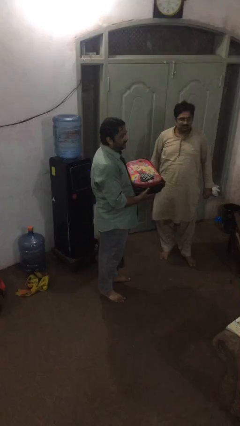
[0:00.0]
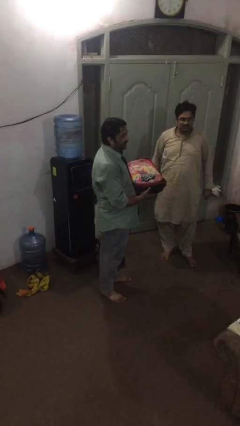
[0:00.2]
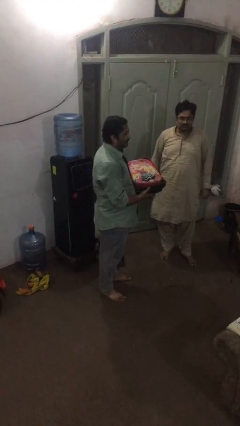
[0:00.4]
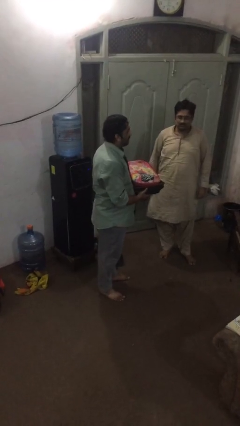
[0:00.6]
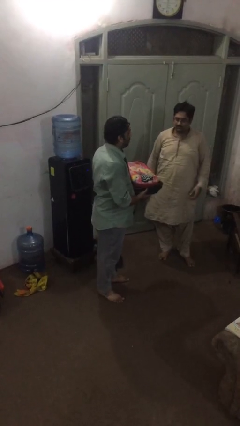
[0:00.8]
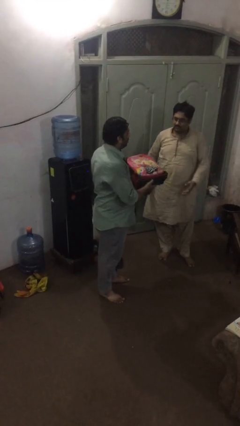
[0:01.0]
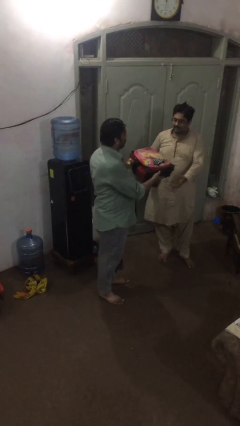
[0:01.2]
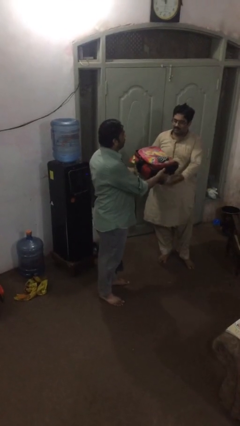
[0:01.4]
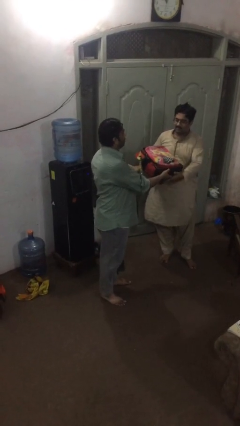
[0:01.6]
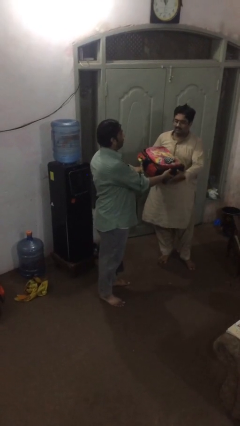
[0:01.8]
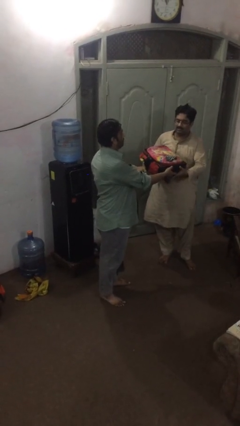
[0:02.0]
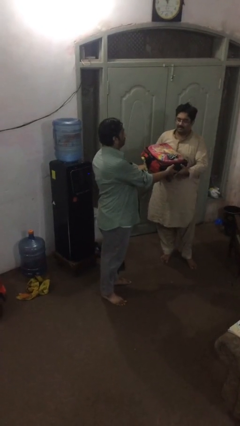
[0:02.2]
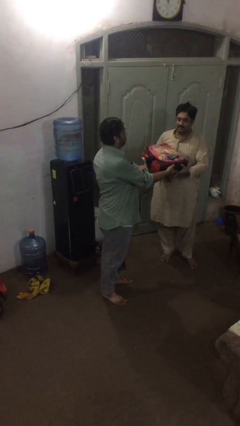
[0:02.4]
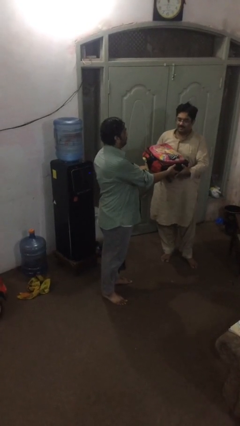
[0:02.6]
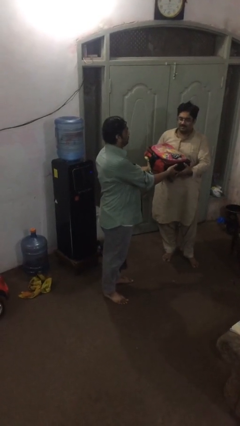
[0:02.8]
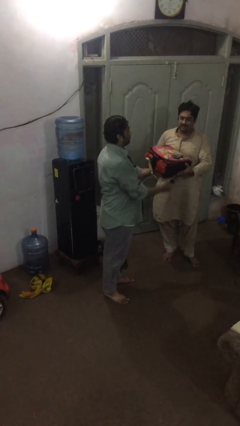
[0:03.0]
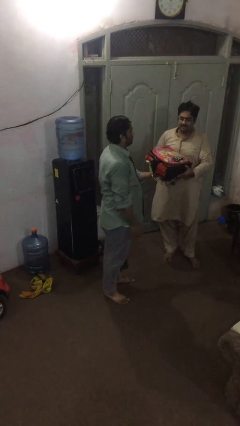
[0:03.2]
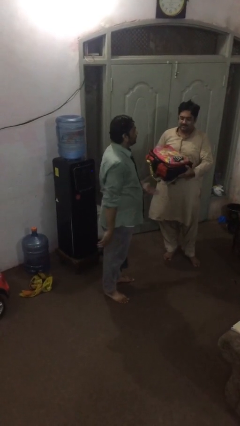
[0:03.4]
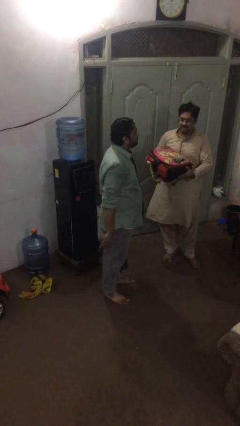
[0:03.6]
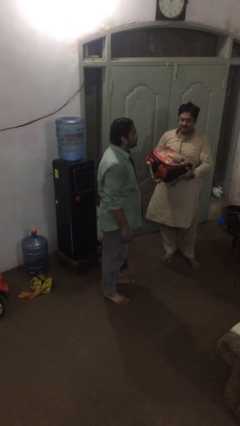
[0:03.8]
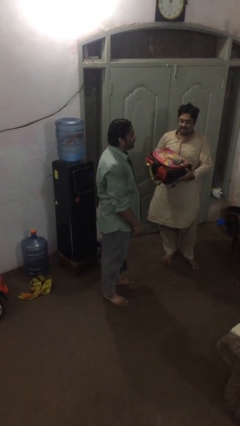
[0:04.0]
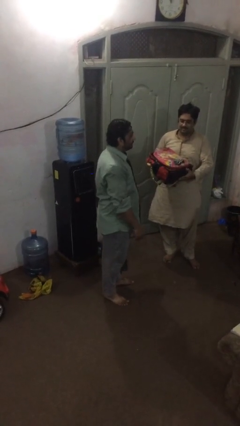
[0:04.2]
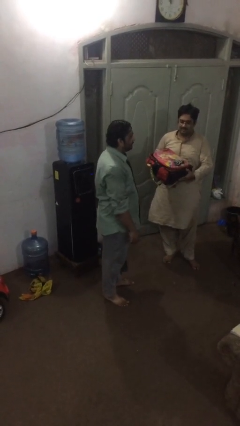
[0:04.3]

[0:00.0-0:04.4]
person transfers object to person

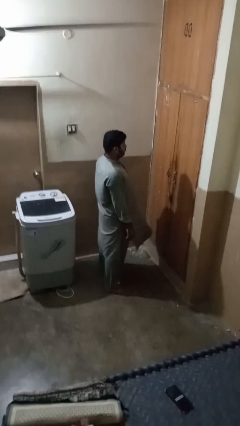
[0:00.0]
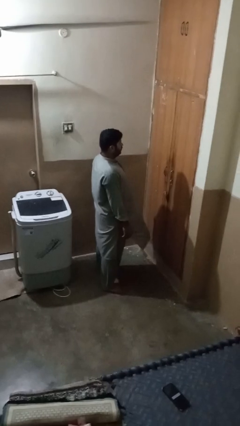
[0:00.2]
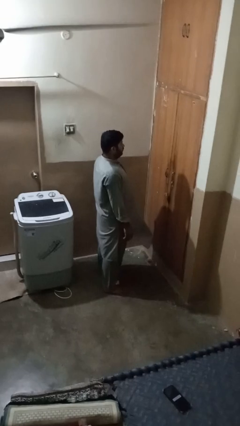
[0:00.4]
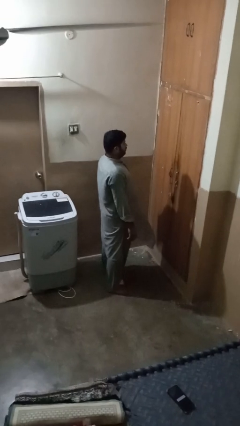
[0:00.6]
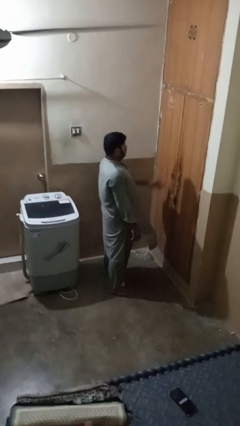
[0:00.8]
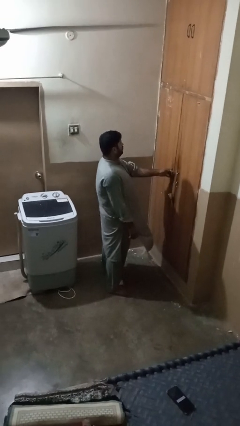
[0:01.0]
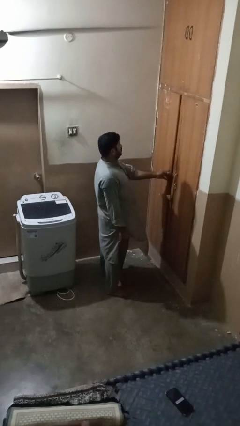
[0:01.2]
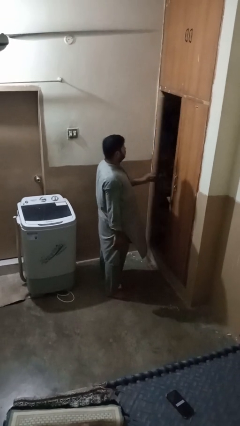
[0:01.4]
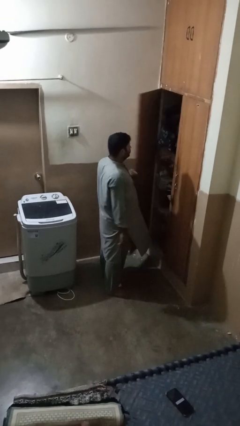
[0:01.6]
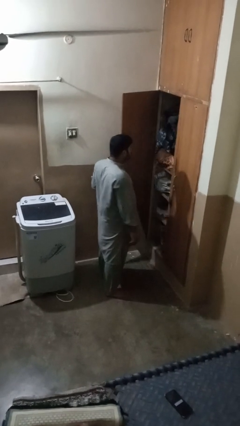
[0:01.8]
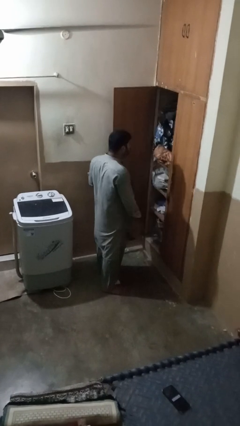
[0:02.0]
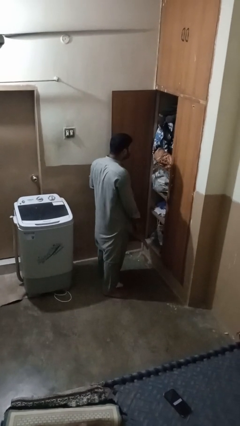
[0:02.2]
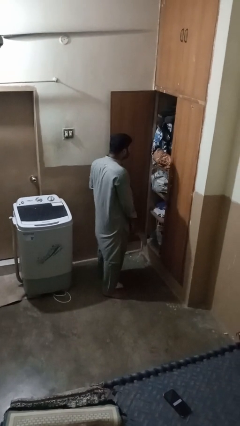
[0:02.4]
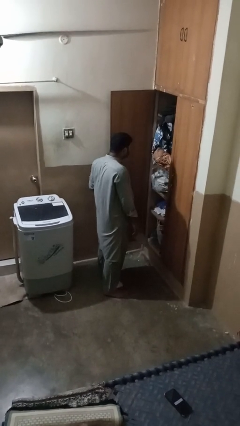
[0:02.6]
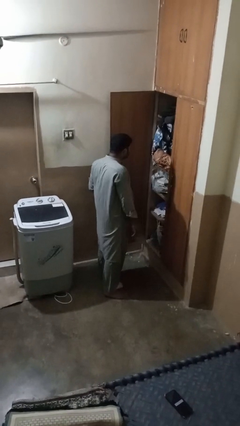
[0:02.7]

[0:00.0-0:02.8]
person opens closet door

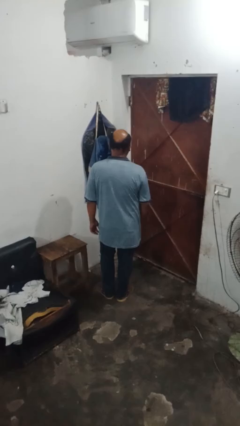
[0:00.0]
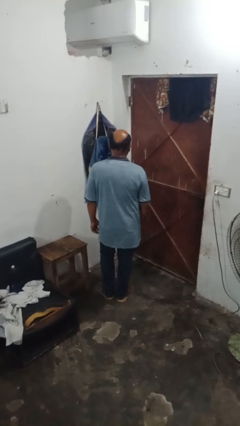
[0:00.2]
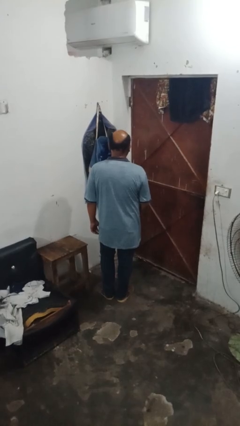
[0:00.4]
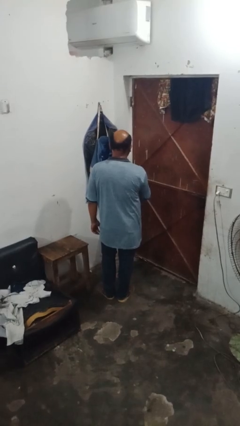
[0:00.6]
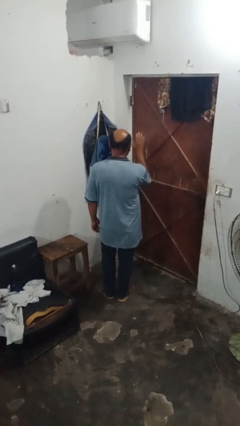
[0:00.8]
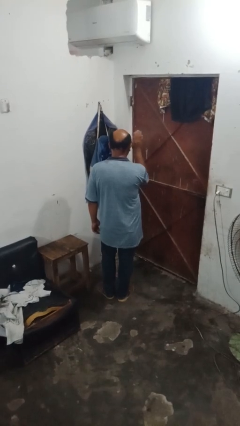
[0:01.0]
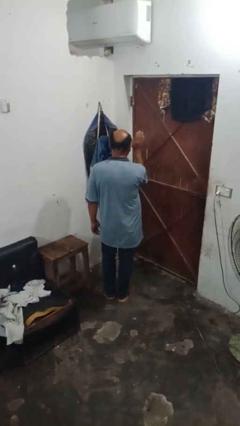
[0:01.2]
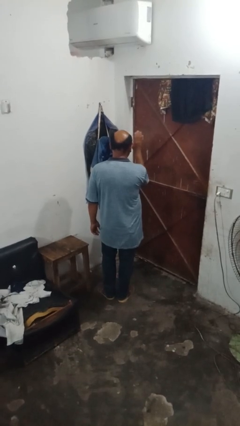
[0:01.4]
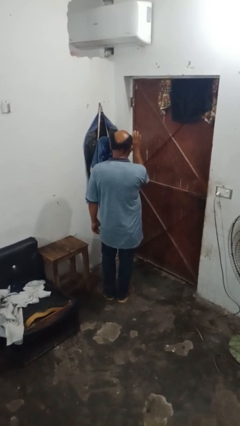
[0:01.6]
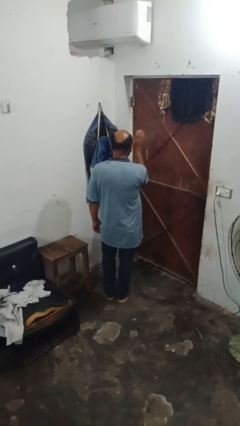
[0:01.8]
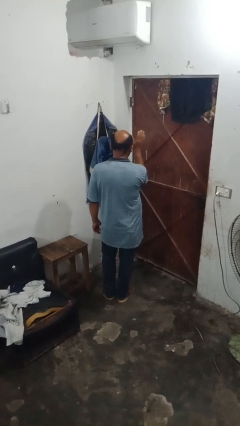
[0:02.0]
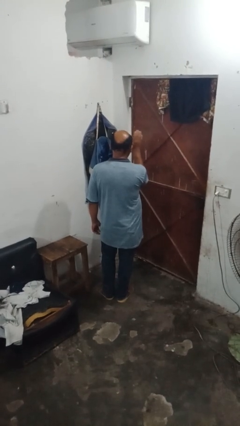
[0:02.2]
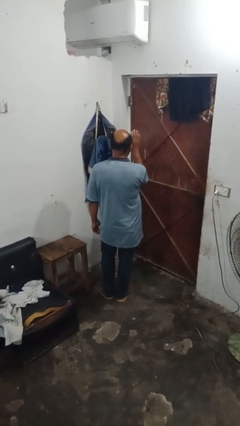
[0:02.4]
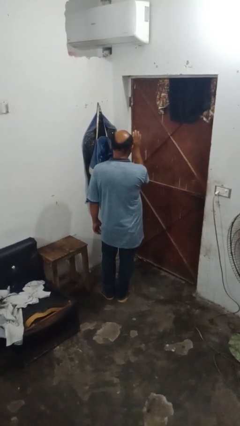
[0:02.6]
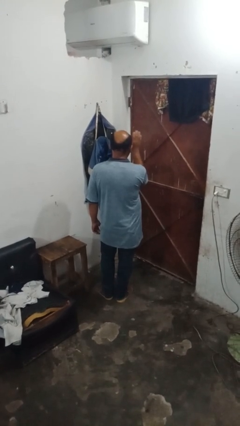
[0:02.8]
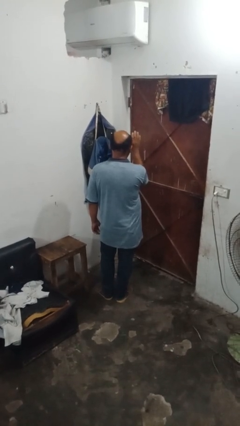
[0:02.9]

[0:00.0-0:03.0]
person waves hand over object

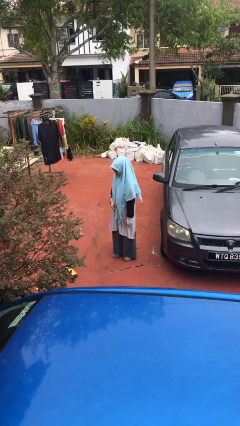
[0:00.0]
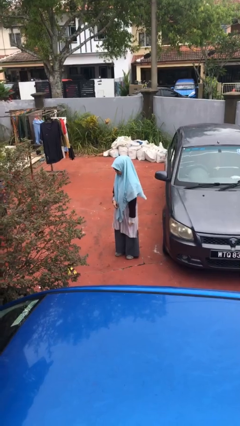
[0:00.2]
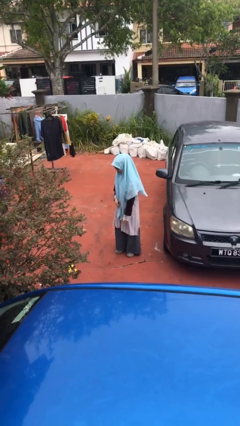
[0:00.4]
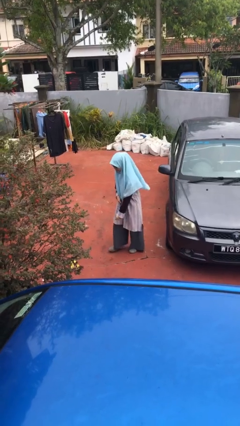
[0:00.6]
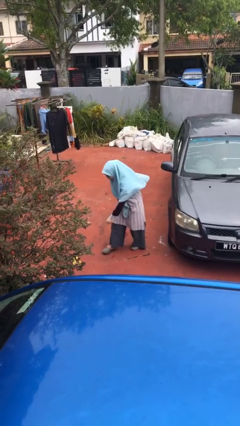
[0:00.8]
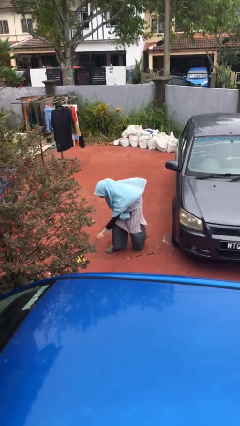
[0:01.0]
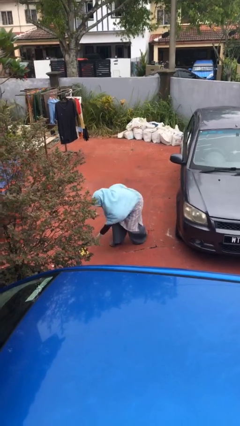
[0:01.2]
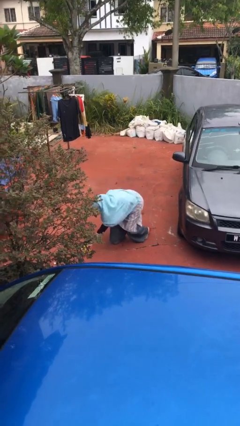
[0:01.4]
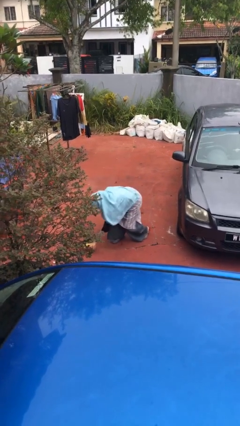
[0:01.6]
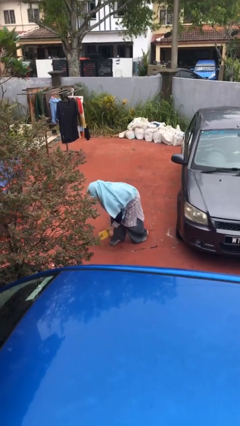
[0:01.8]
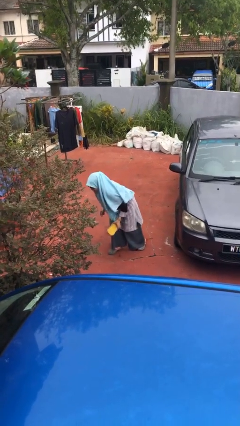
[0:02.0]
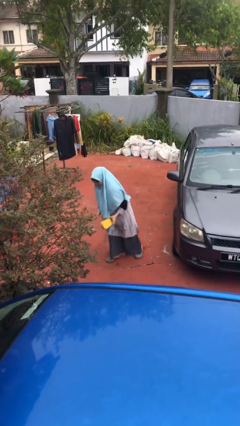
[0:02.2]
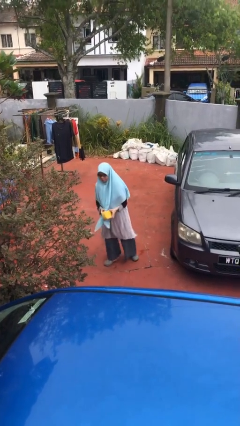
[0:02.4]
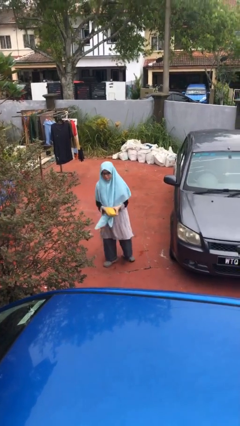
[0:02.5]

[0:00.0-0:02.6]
person picks up object from floor

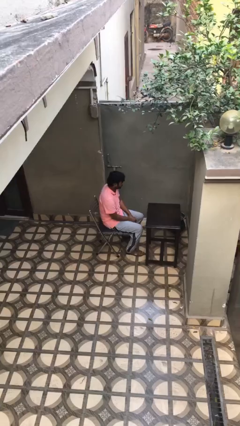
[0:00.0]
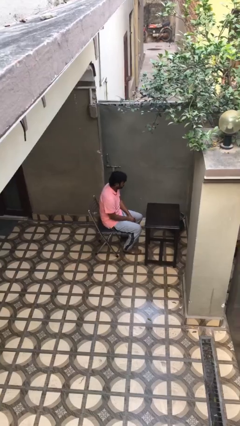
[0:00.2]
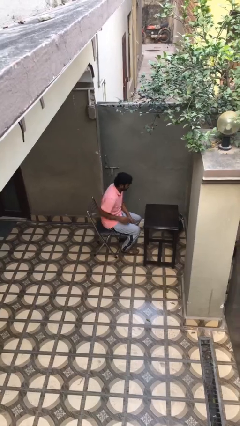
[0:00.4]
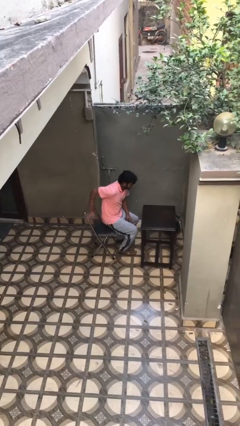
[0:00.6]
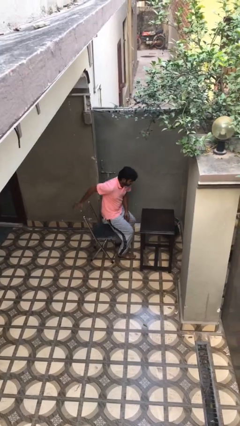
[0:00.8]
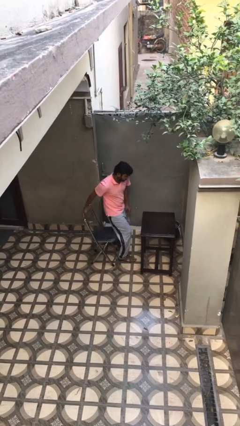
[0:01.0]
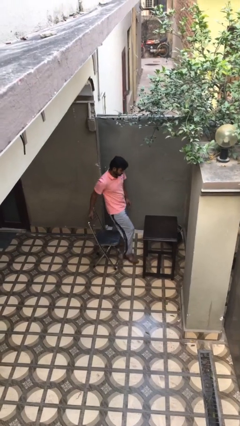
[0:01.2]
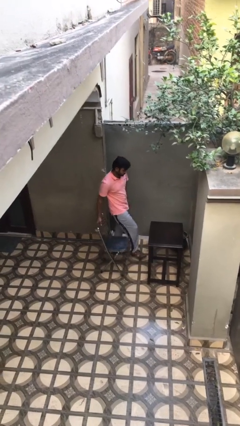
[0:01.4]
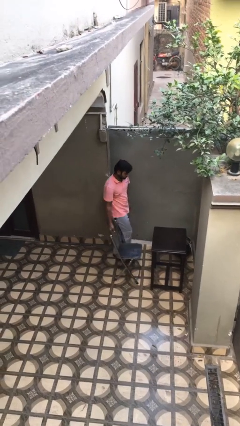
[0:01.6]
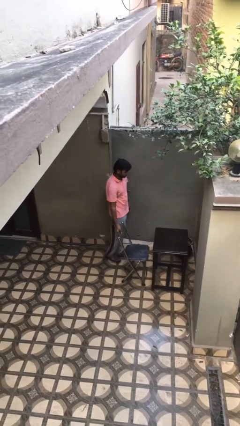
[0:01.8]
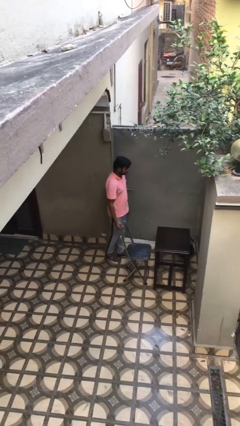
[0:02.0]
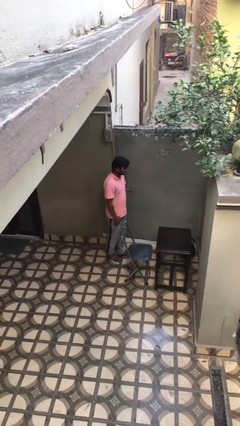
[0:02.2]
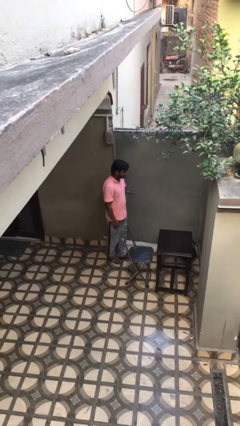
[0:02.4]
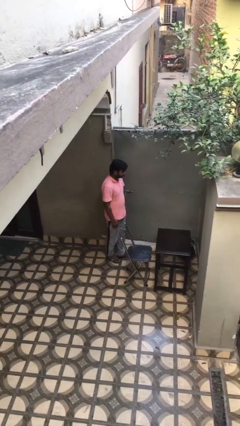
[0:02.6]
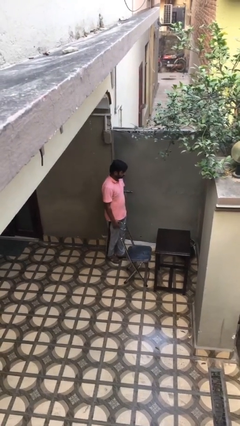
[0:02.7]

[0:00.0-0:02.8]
person stands up

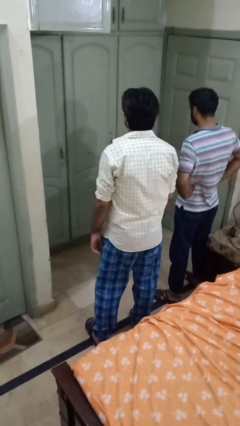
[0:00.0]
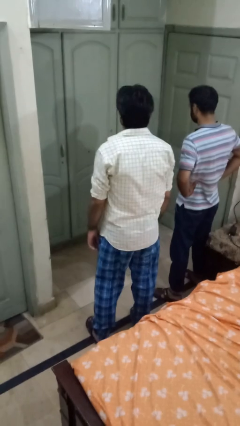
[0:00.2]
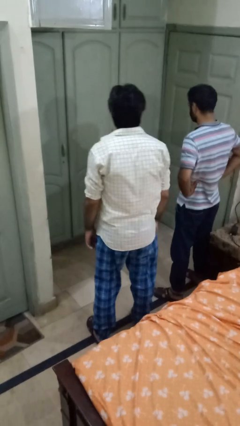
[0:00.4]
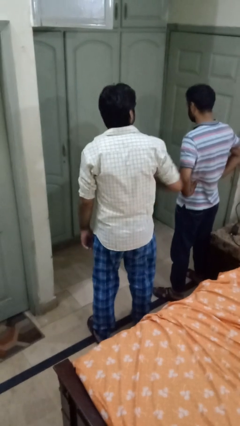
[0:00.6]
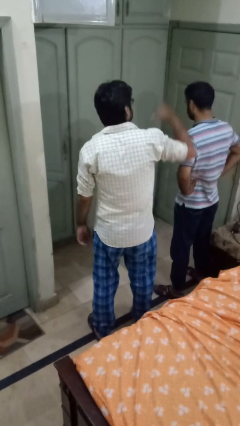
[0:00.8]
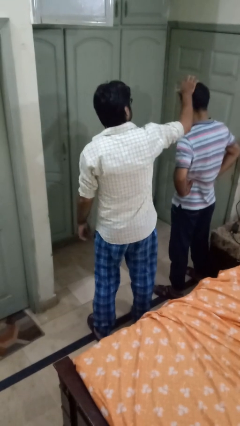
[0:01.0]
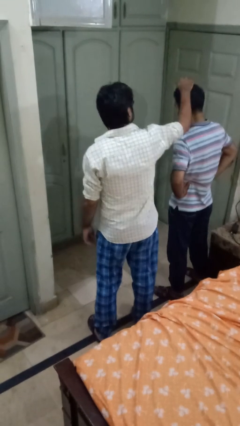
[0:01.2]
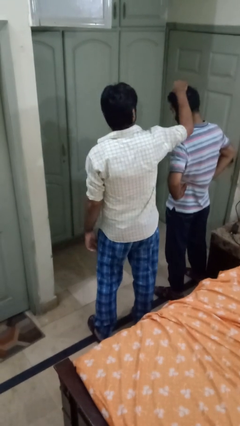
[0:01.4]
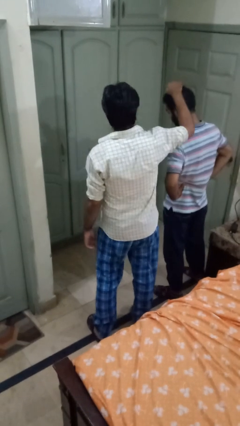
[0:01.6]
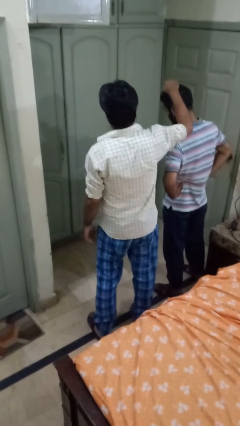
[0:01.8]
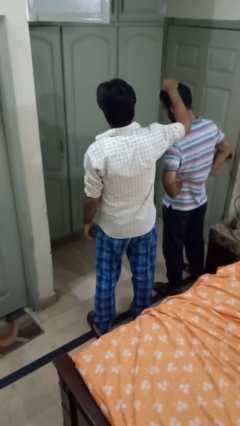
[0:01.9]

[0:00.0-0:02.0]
person grabs person by hair
